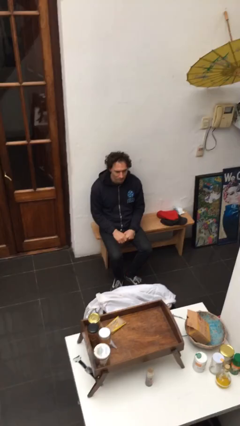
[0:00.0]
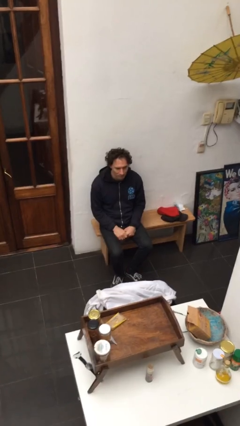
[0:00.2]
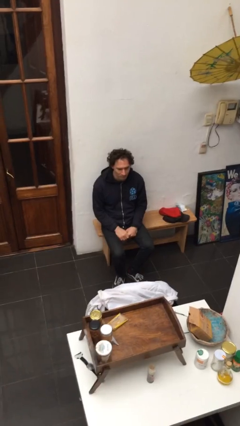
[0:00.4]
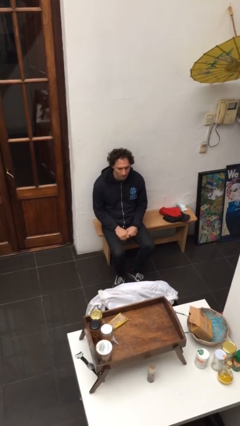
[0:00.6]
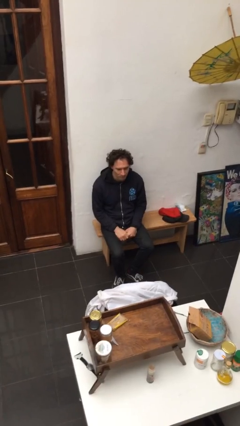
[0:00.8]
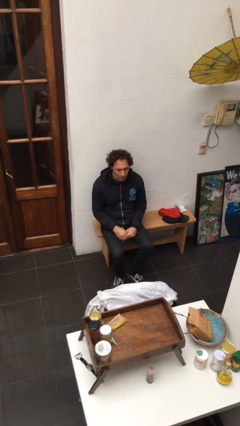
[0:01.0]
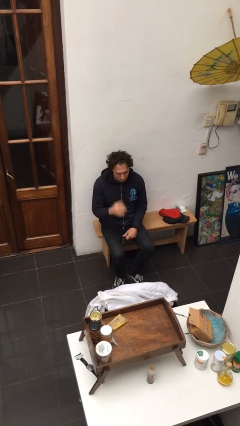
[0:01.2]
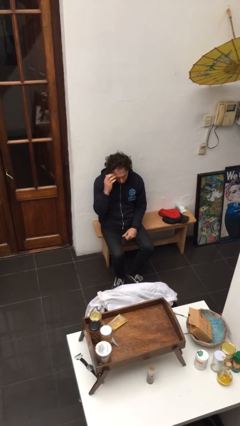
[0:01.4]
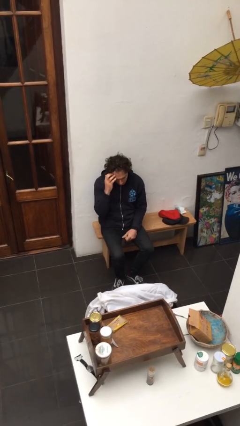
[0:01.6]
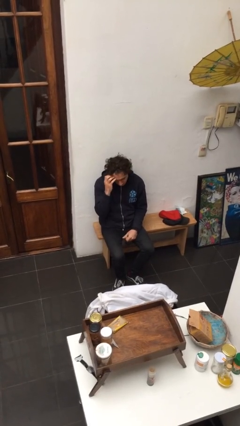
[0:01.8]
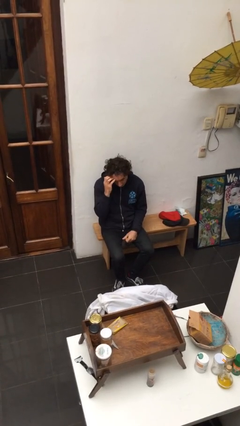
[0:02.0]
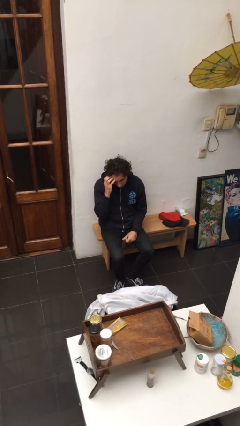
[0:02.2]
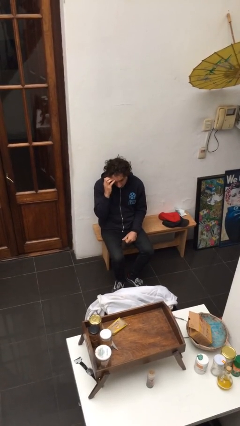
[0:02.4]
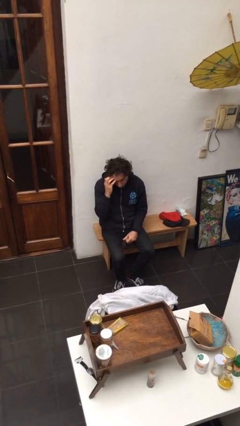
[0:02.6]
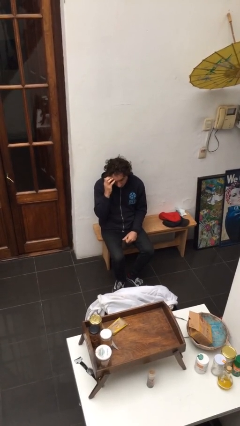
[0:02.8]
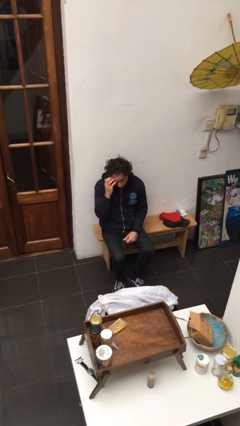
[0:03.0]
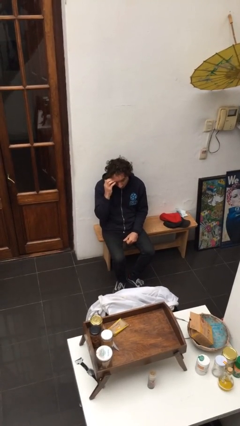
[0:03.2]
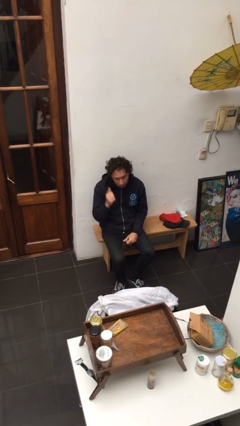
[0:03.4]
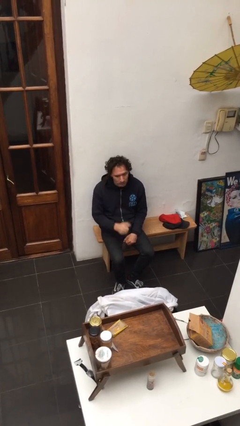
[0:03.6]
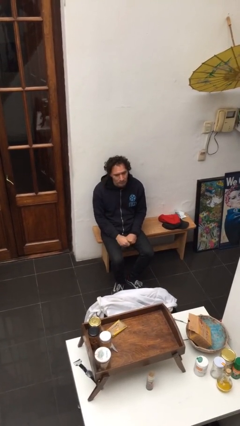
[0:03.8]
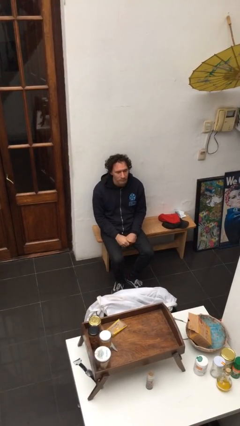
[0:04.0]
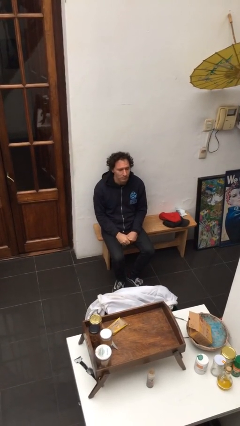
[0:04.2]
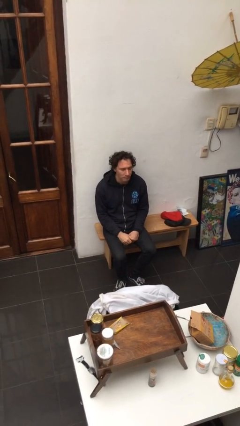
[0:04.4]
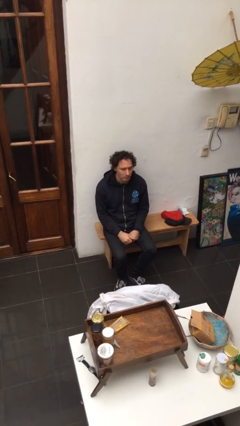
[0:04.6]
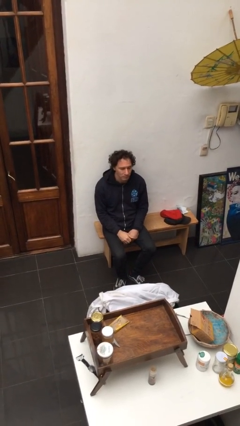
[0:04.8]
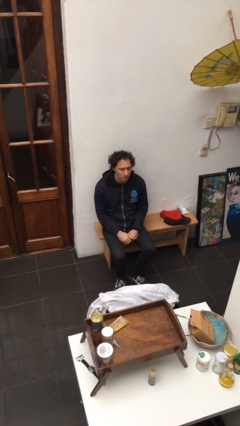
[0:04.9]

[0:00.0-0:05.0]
person scratches face

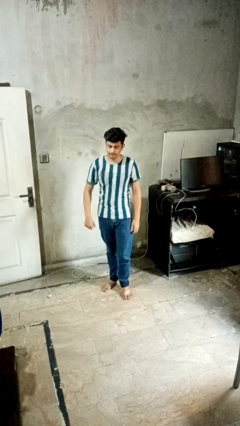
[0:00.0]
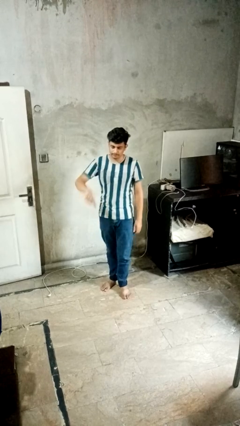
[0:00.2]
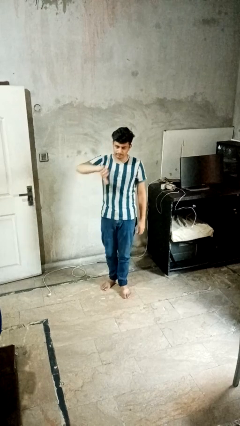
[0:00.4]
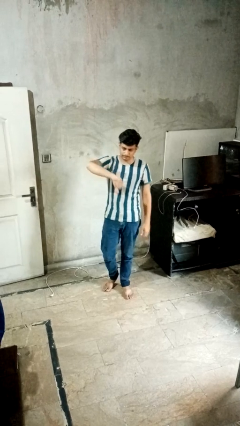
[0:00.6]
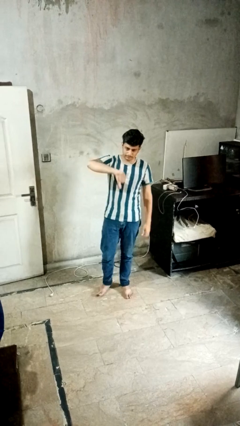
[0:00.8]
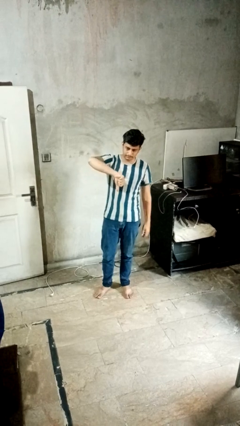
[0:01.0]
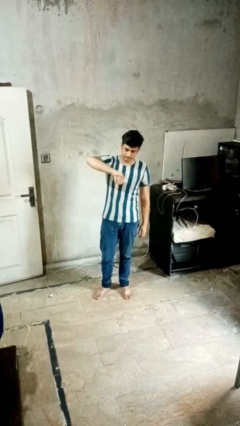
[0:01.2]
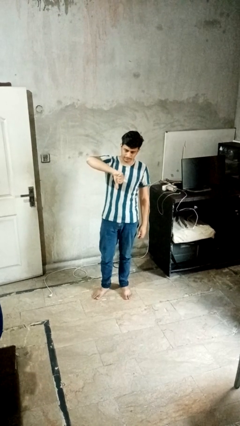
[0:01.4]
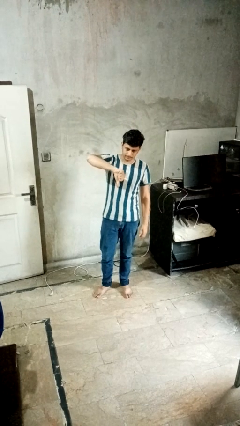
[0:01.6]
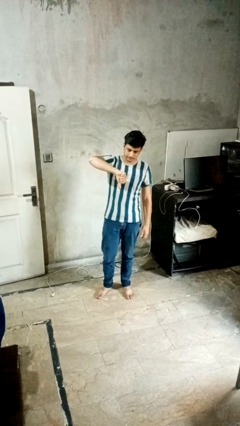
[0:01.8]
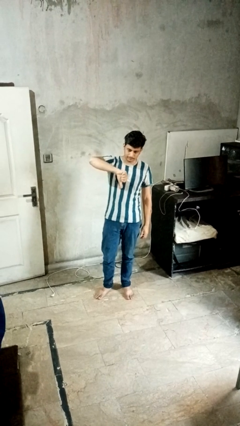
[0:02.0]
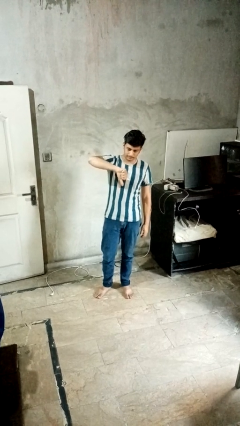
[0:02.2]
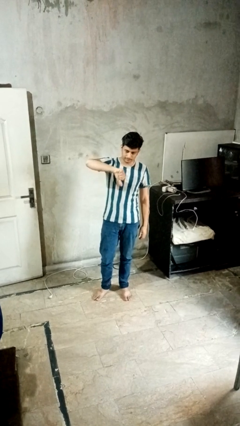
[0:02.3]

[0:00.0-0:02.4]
person gestures thumbs down

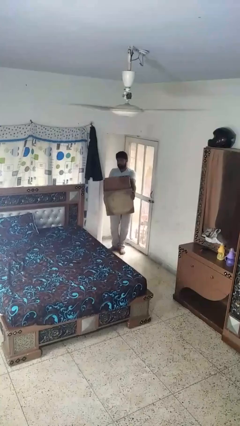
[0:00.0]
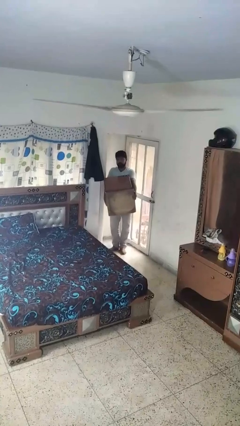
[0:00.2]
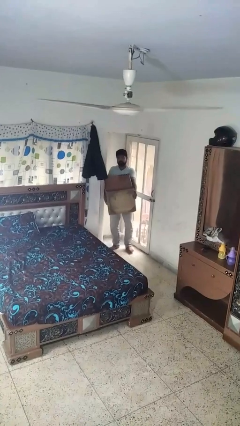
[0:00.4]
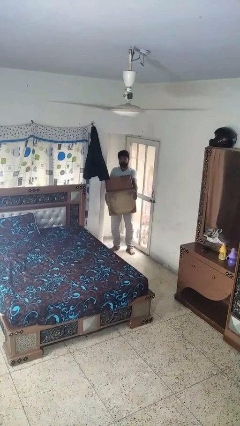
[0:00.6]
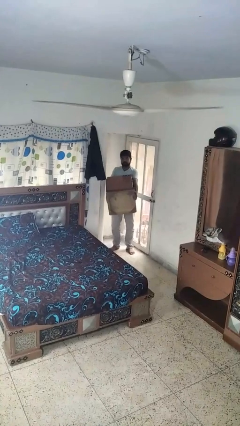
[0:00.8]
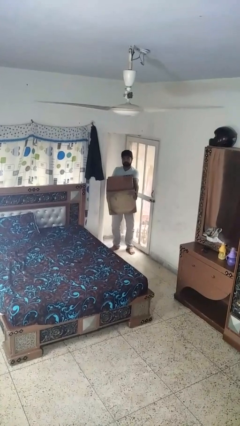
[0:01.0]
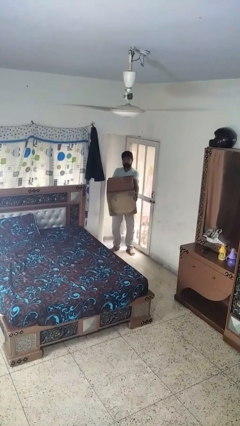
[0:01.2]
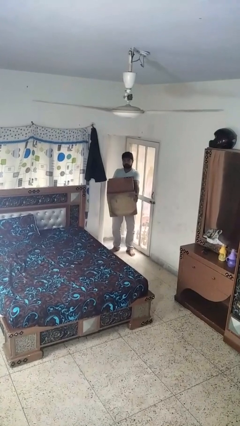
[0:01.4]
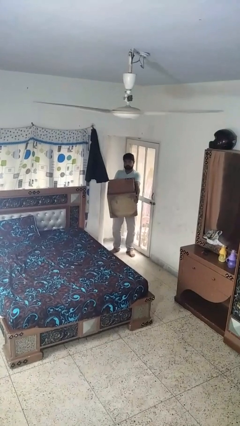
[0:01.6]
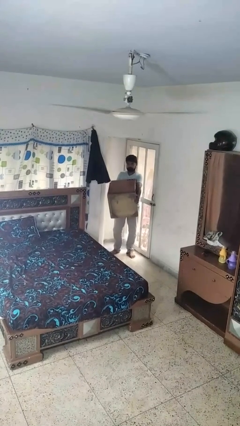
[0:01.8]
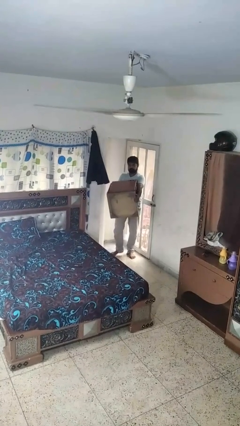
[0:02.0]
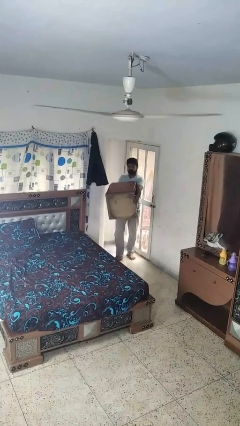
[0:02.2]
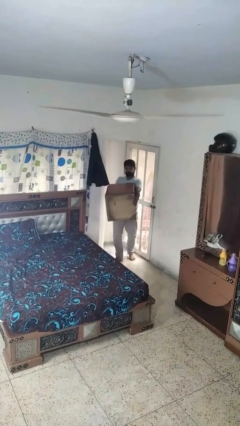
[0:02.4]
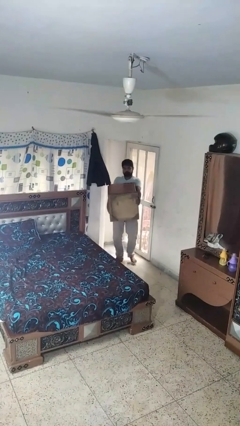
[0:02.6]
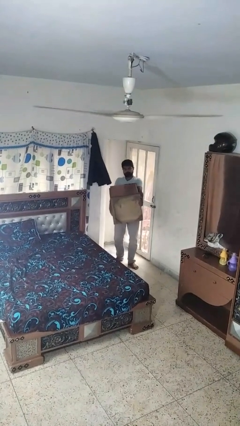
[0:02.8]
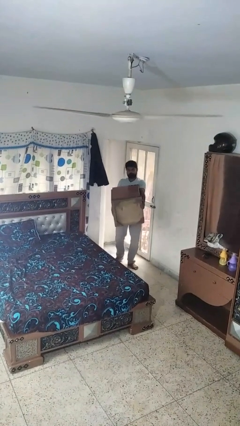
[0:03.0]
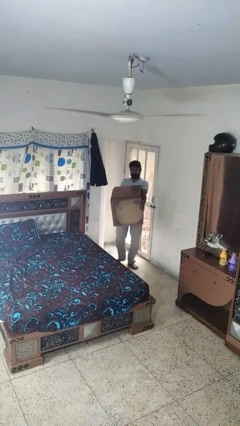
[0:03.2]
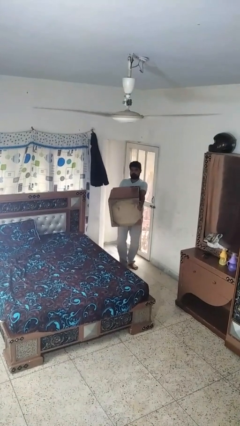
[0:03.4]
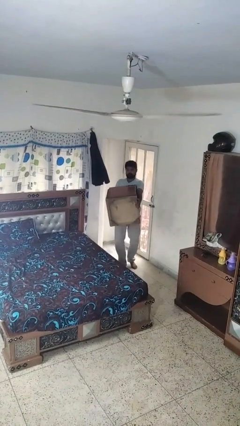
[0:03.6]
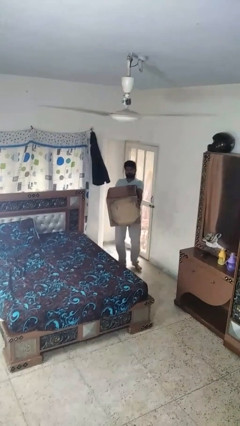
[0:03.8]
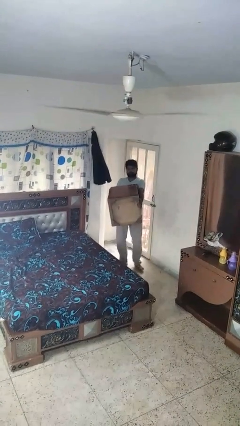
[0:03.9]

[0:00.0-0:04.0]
person carries furniture

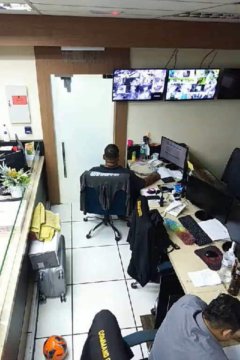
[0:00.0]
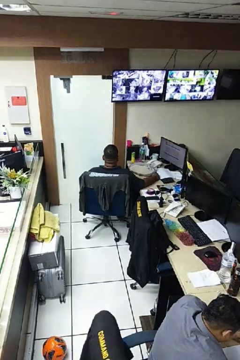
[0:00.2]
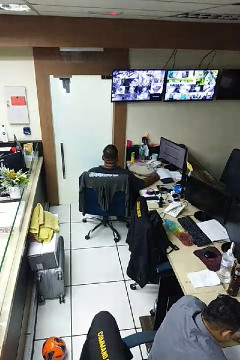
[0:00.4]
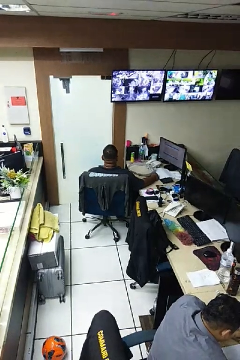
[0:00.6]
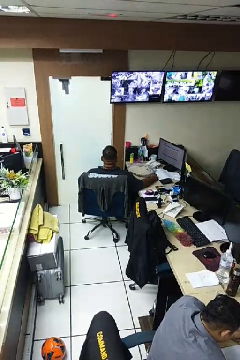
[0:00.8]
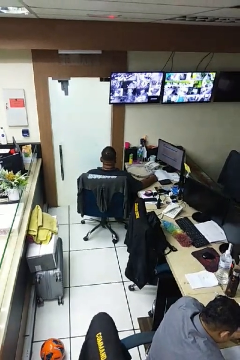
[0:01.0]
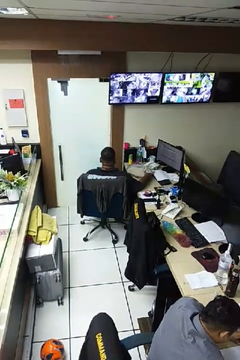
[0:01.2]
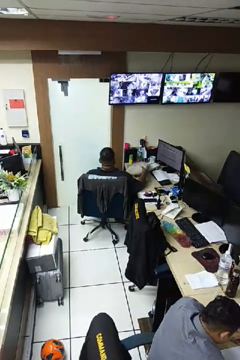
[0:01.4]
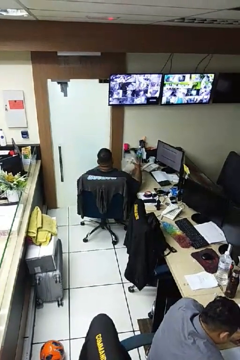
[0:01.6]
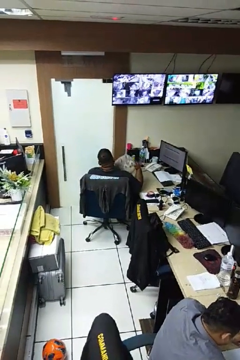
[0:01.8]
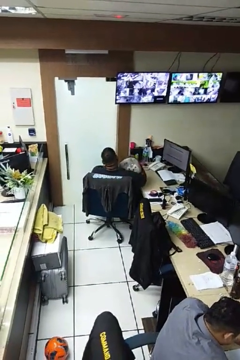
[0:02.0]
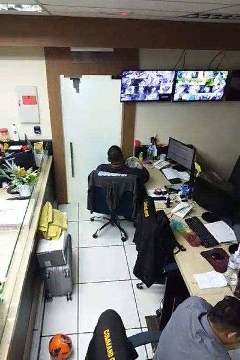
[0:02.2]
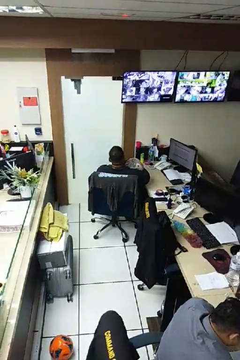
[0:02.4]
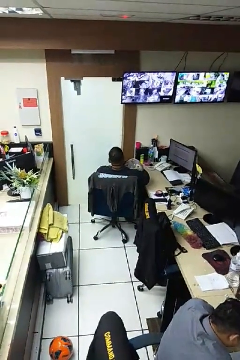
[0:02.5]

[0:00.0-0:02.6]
person hugs stuffed animal

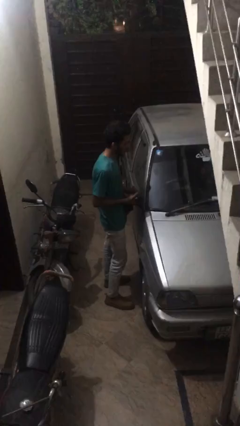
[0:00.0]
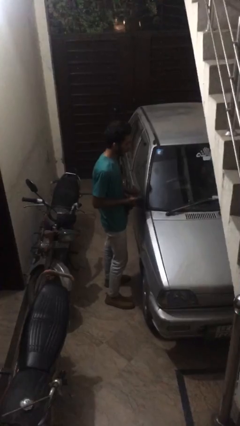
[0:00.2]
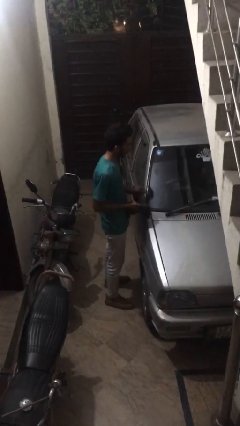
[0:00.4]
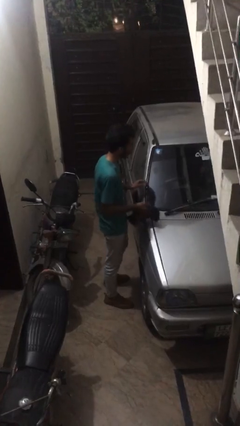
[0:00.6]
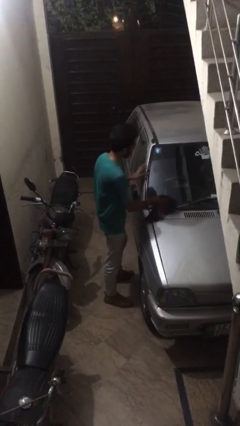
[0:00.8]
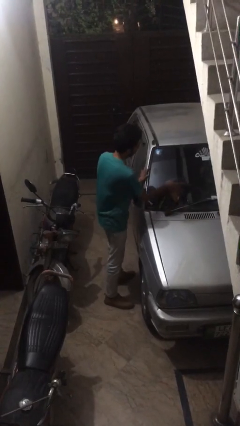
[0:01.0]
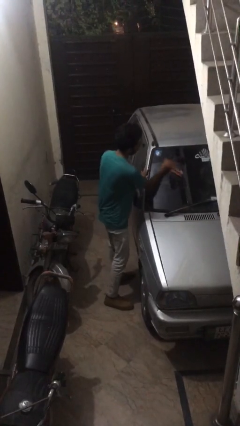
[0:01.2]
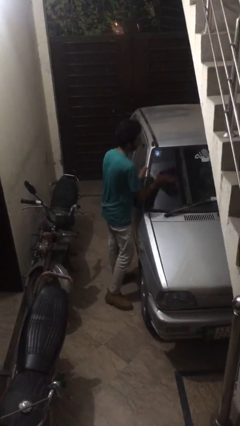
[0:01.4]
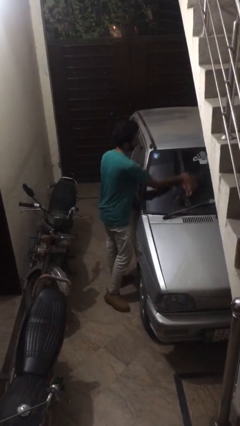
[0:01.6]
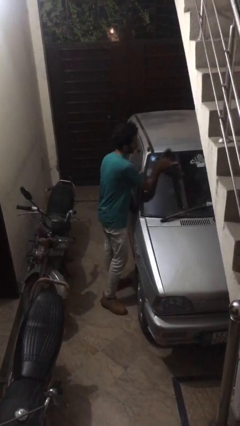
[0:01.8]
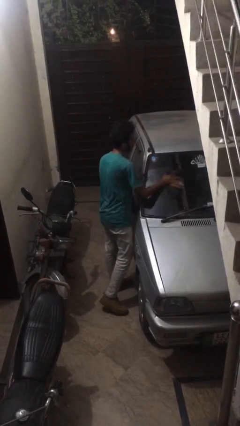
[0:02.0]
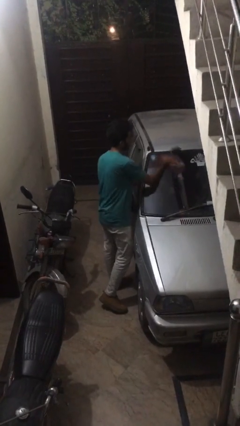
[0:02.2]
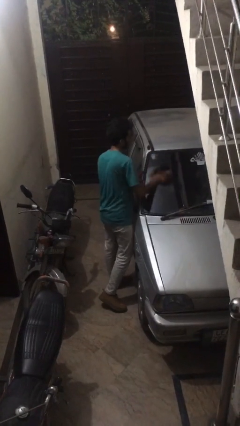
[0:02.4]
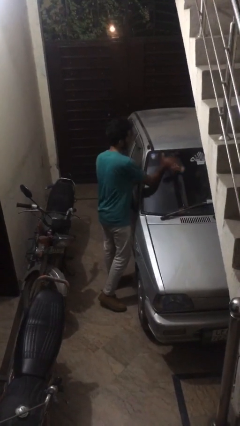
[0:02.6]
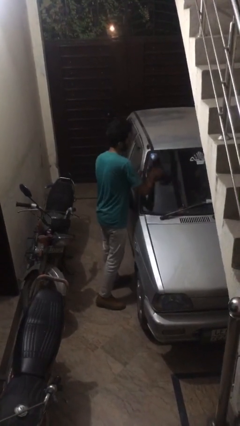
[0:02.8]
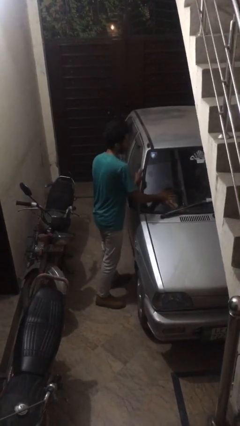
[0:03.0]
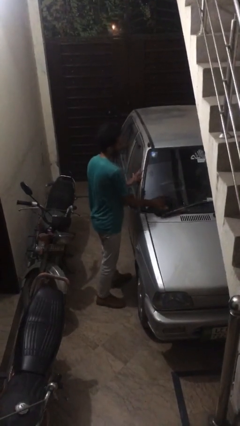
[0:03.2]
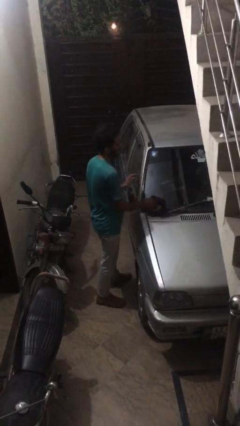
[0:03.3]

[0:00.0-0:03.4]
person polishes car with rag

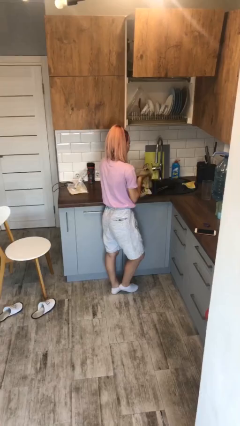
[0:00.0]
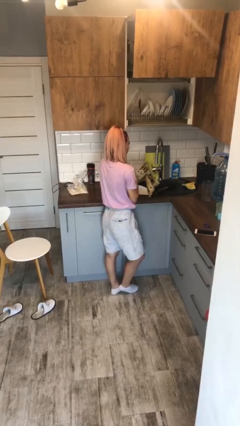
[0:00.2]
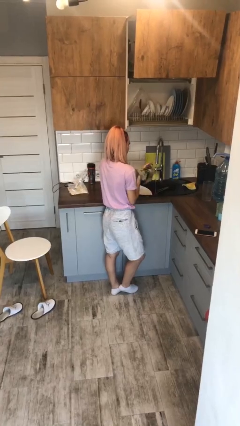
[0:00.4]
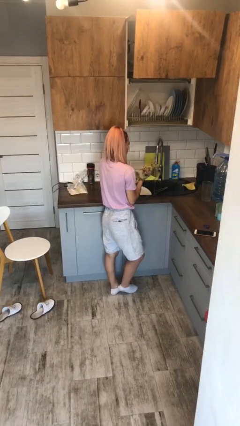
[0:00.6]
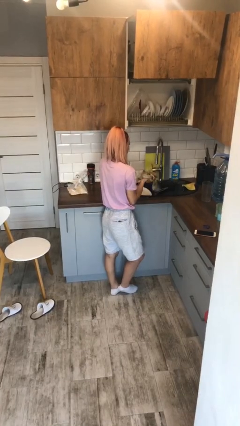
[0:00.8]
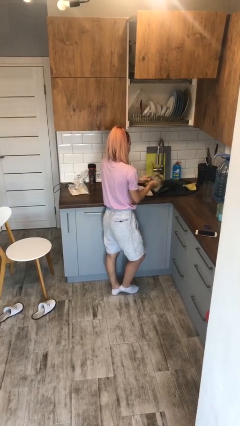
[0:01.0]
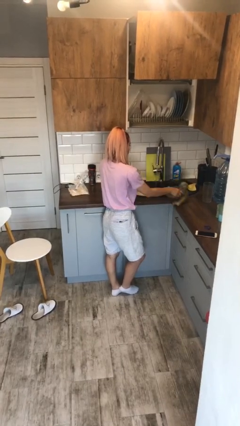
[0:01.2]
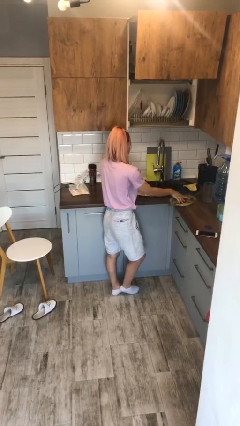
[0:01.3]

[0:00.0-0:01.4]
person dries hands with towel
